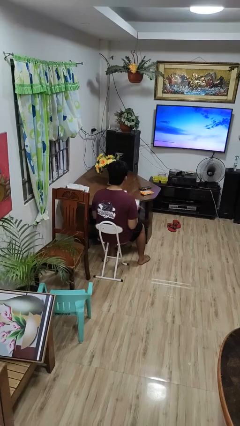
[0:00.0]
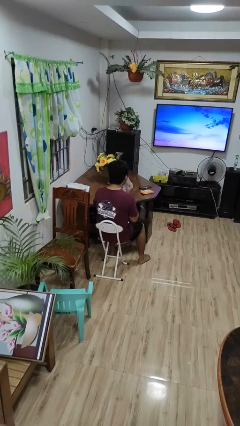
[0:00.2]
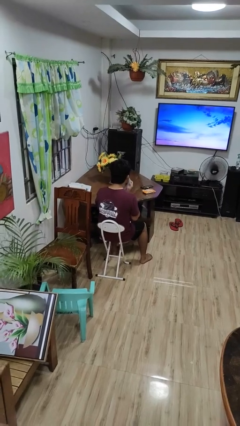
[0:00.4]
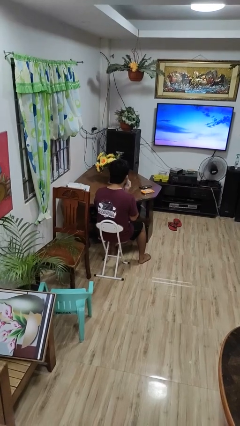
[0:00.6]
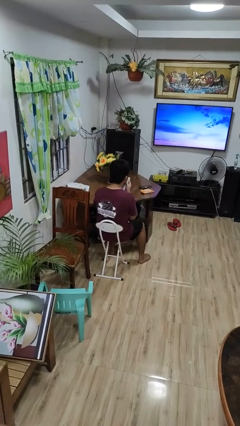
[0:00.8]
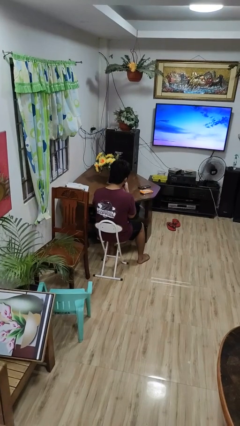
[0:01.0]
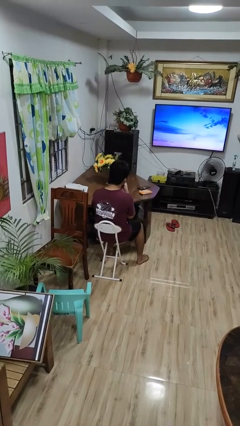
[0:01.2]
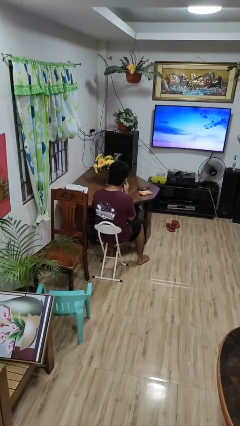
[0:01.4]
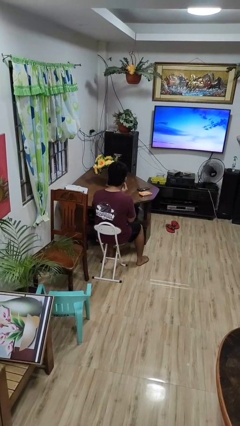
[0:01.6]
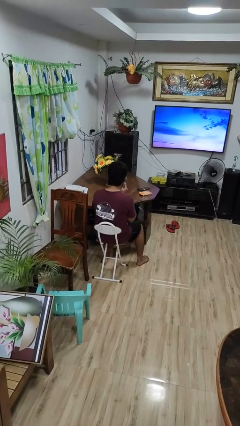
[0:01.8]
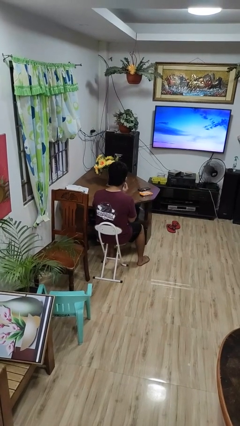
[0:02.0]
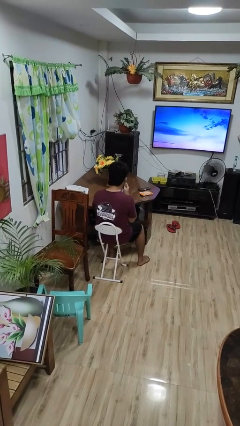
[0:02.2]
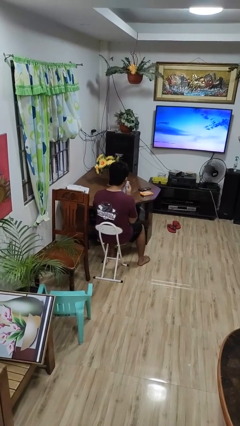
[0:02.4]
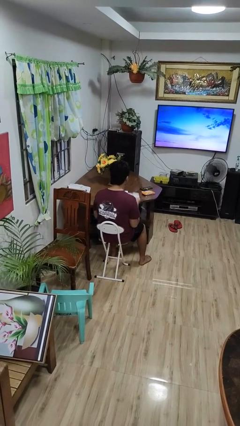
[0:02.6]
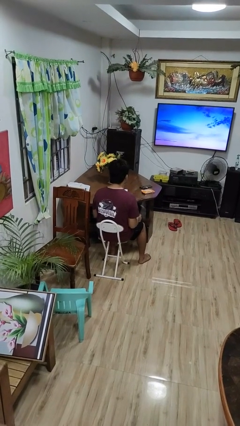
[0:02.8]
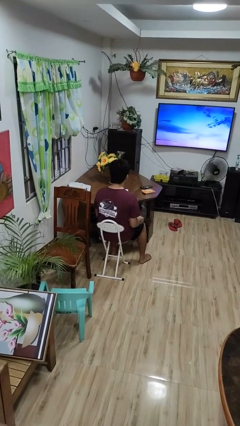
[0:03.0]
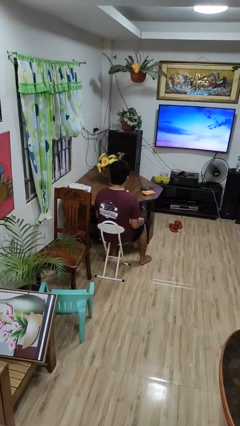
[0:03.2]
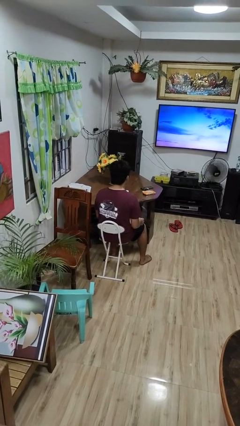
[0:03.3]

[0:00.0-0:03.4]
person wipes mouth with napkin

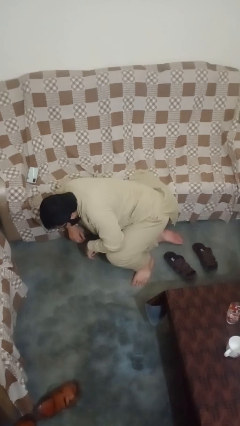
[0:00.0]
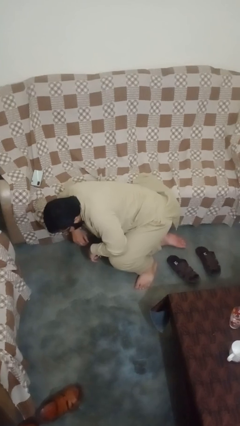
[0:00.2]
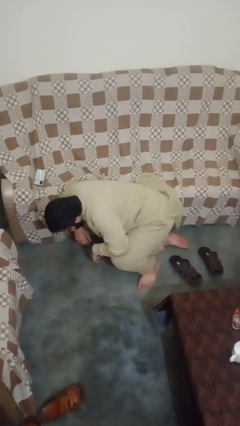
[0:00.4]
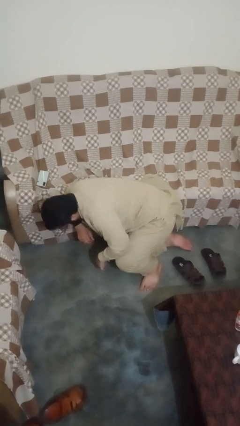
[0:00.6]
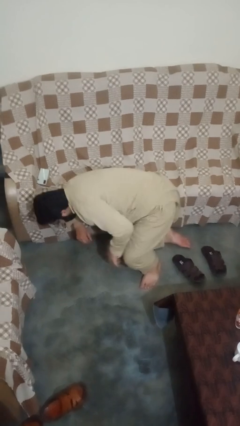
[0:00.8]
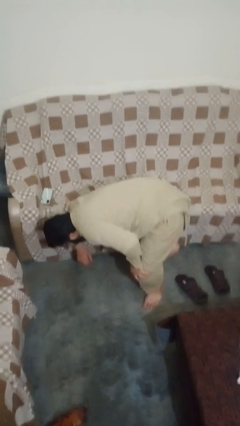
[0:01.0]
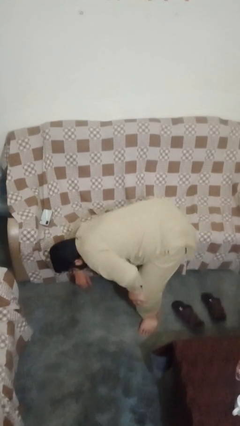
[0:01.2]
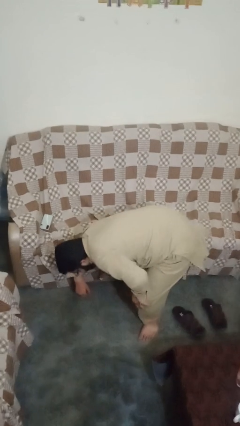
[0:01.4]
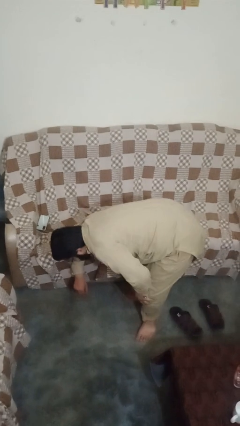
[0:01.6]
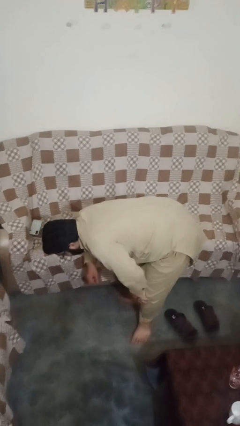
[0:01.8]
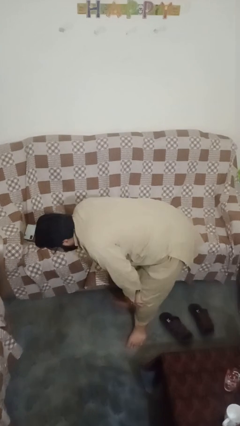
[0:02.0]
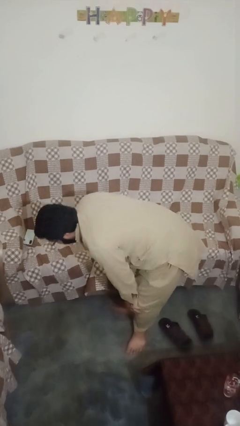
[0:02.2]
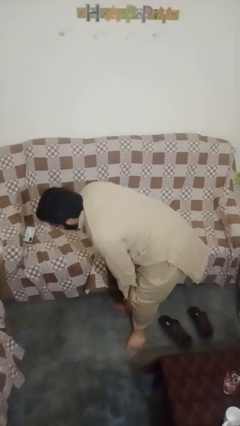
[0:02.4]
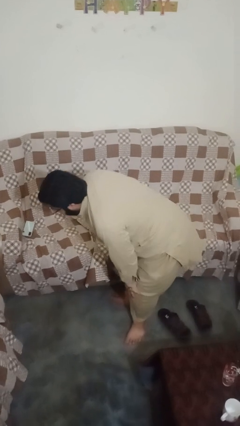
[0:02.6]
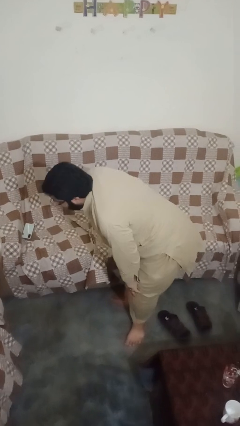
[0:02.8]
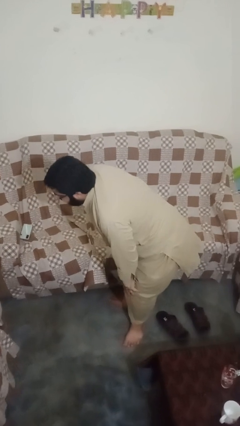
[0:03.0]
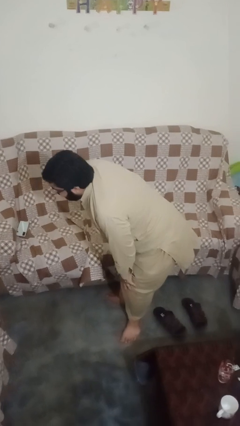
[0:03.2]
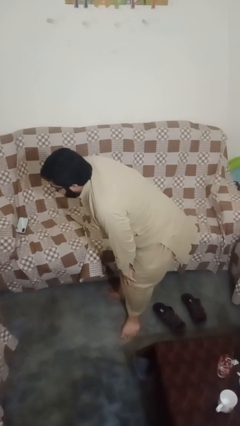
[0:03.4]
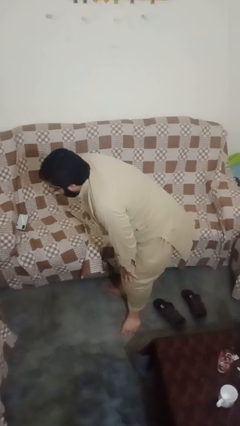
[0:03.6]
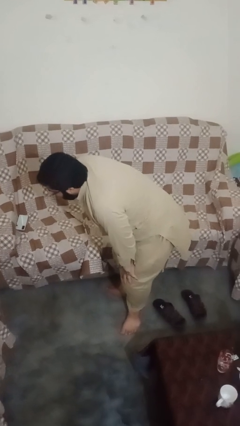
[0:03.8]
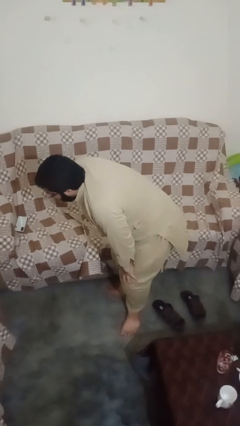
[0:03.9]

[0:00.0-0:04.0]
person stands up from floor

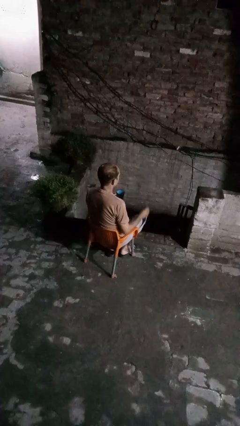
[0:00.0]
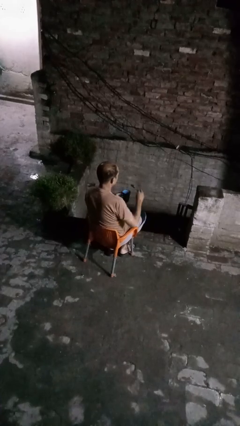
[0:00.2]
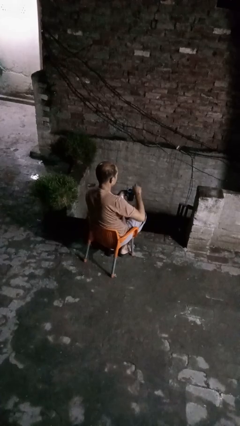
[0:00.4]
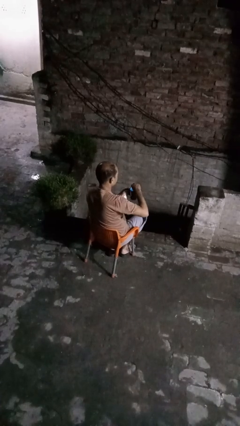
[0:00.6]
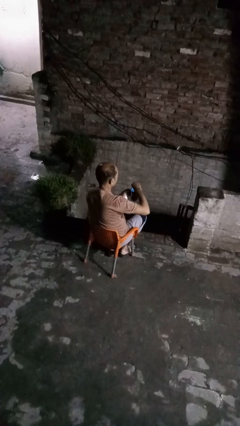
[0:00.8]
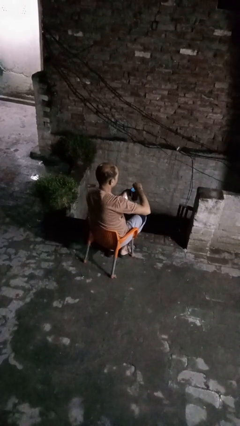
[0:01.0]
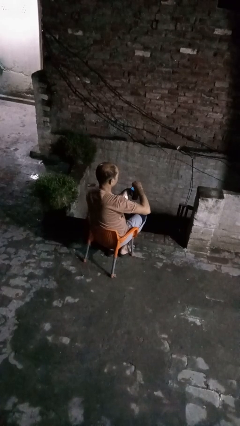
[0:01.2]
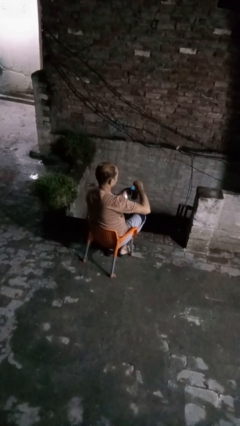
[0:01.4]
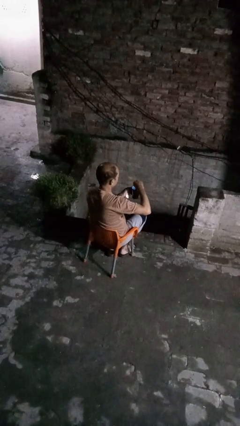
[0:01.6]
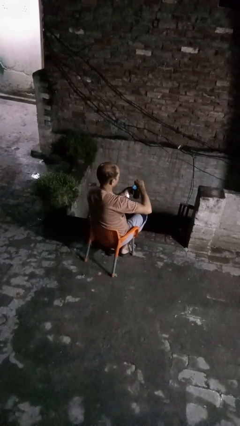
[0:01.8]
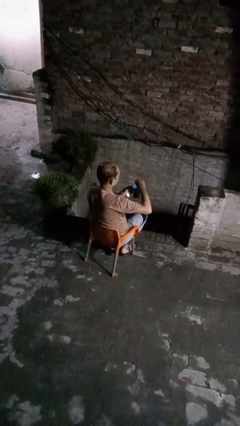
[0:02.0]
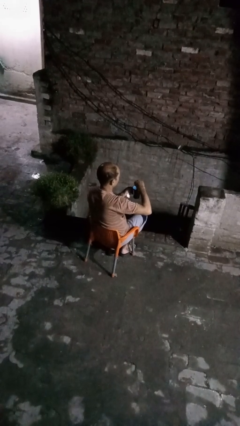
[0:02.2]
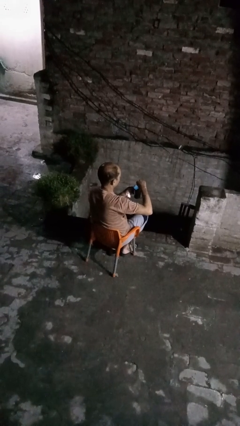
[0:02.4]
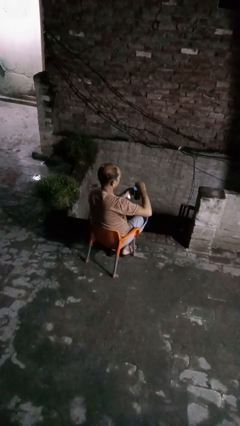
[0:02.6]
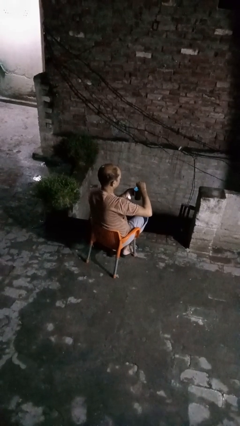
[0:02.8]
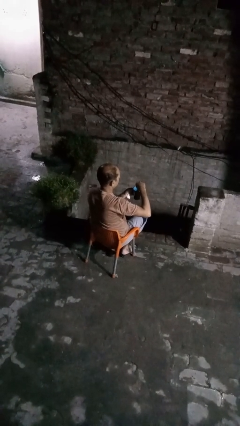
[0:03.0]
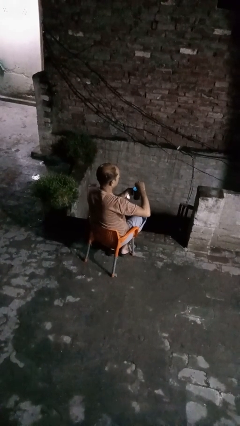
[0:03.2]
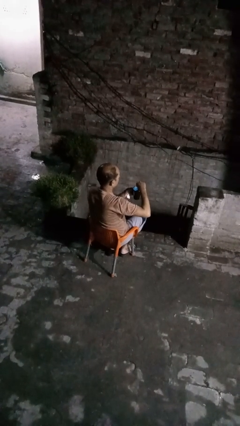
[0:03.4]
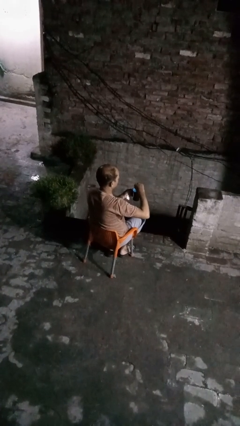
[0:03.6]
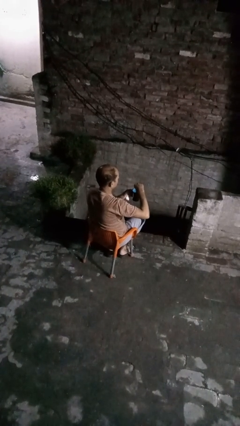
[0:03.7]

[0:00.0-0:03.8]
person stirs mug

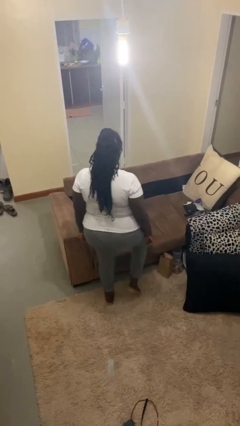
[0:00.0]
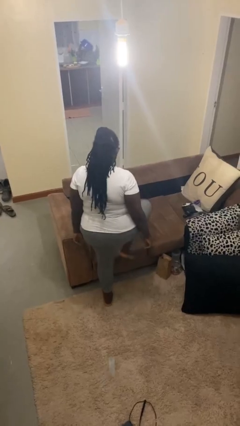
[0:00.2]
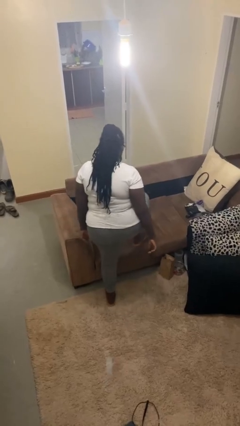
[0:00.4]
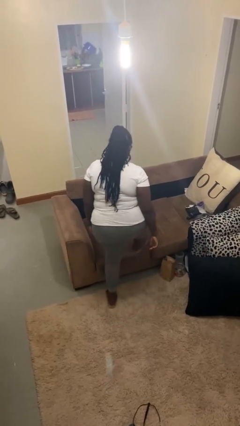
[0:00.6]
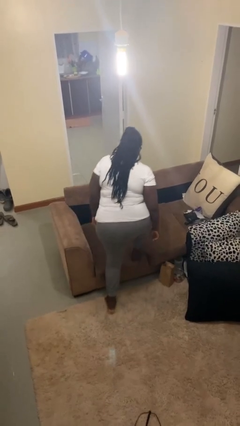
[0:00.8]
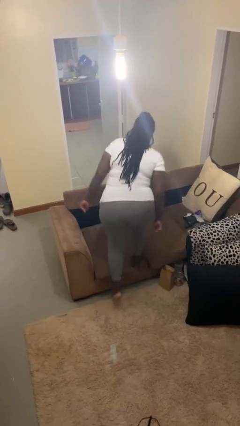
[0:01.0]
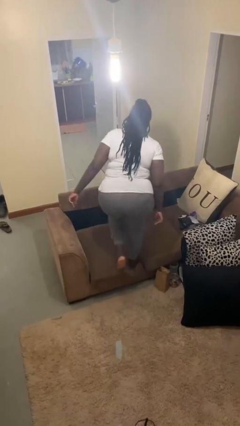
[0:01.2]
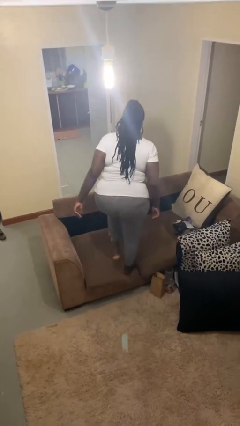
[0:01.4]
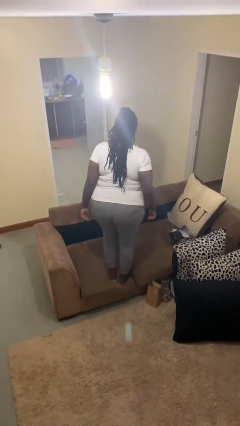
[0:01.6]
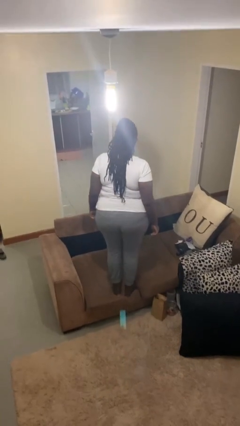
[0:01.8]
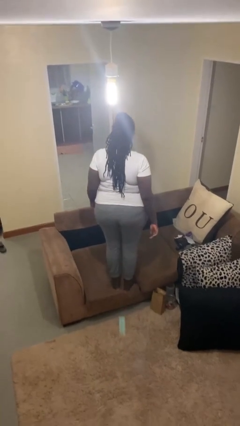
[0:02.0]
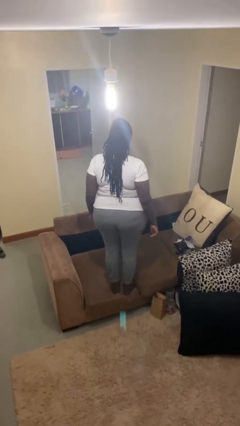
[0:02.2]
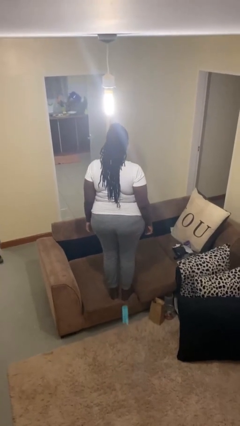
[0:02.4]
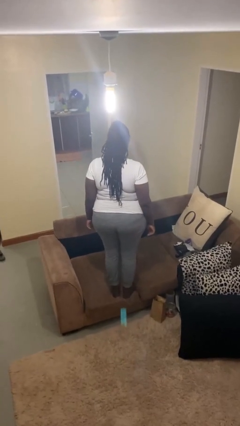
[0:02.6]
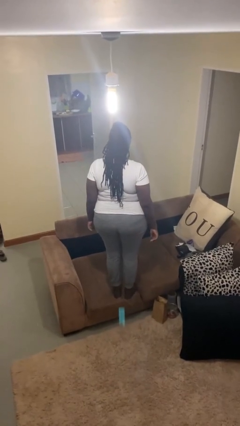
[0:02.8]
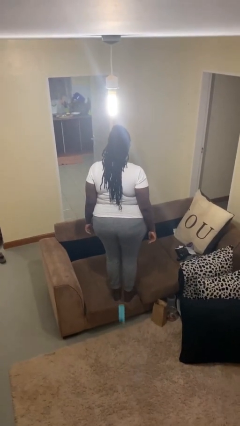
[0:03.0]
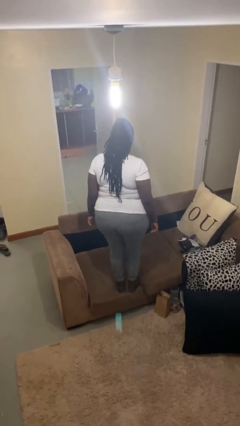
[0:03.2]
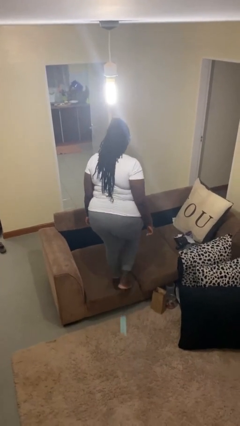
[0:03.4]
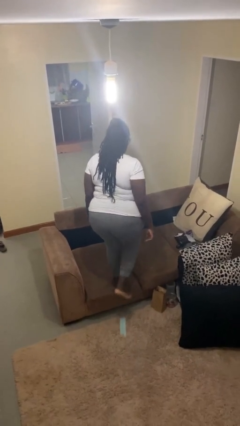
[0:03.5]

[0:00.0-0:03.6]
person climbs on couch

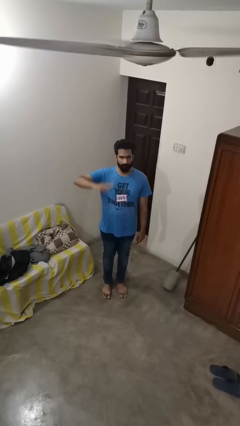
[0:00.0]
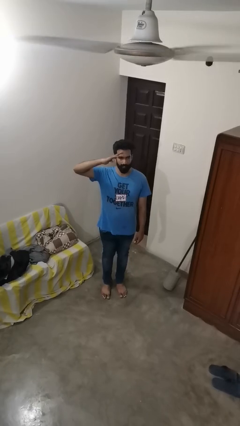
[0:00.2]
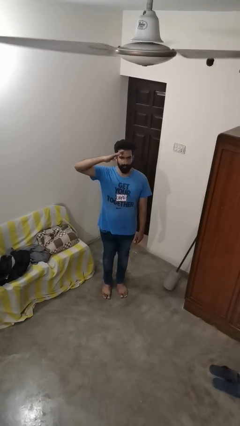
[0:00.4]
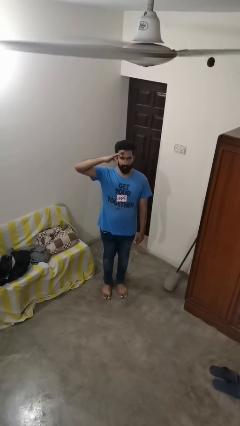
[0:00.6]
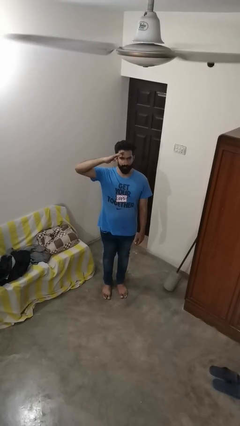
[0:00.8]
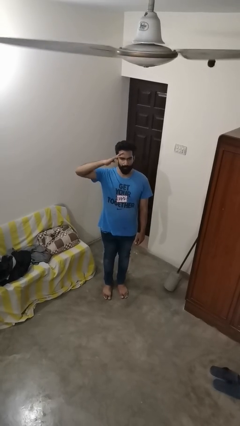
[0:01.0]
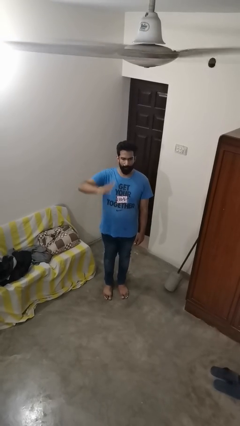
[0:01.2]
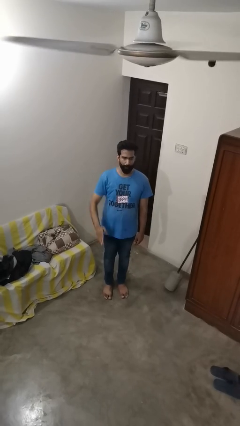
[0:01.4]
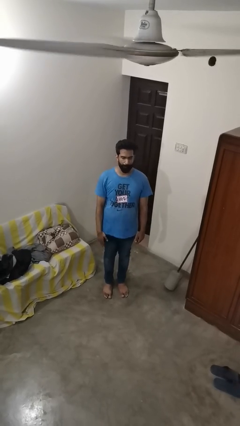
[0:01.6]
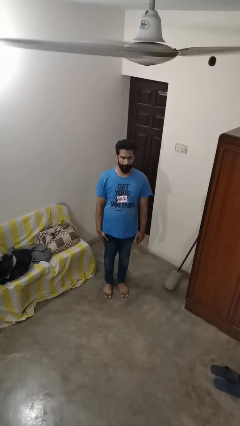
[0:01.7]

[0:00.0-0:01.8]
person salutes

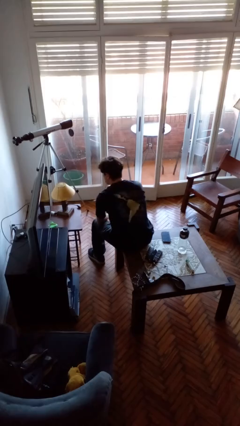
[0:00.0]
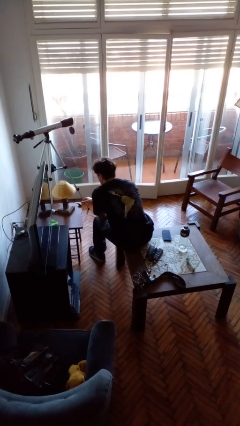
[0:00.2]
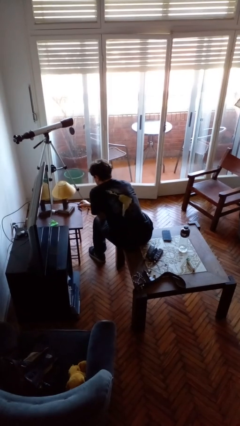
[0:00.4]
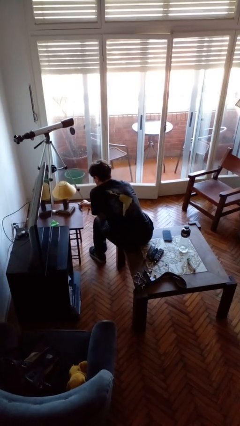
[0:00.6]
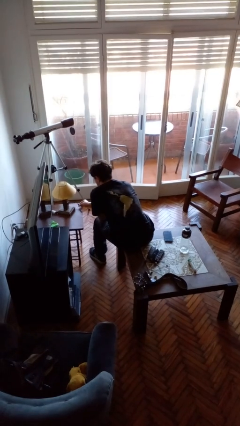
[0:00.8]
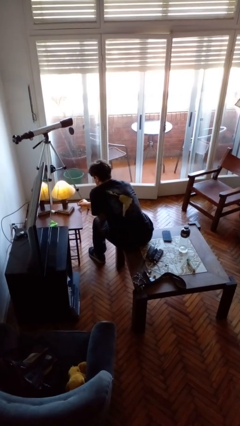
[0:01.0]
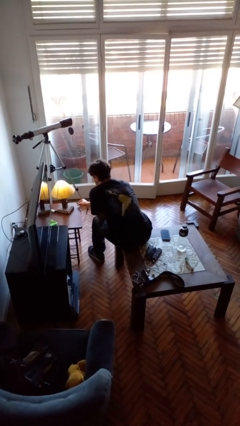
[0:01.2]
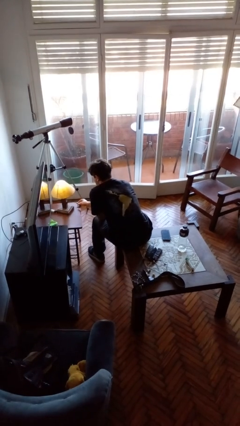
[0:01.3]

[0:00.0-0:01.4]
person turns on lamp
